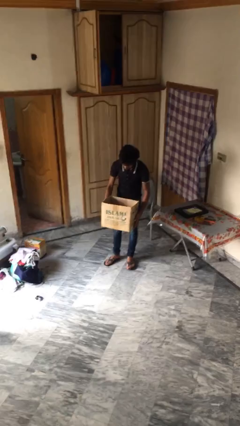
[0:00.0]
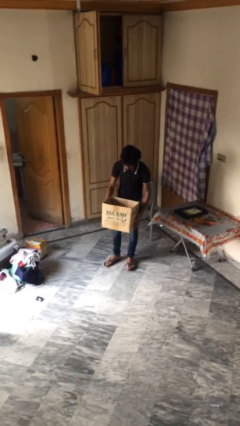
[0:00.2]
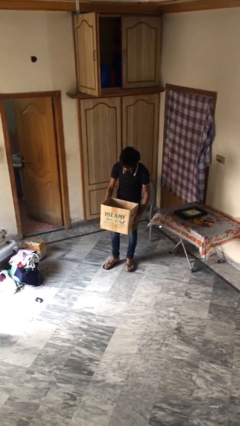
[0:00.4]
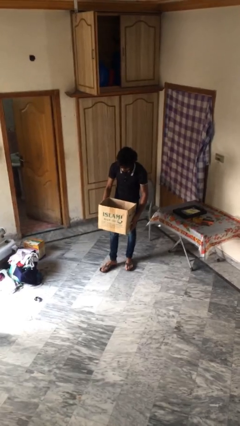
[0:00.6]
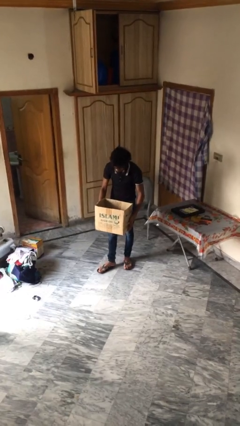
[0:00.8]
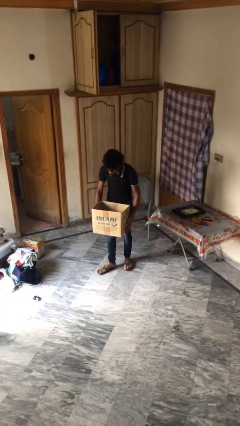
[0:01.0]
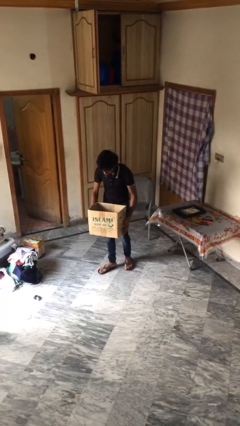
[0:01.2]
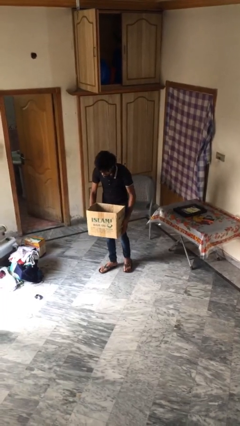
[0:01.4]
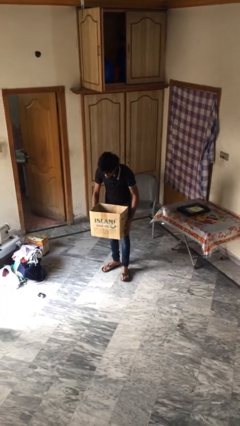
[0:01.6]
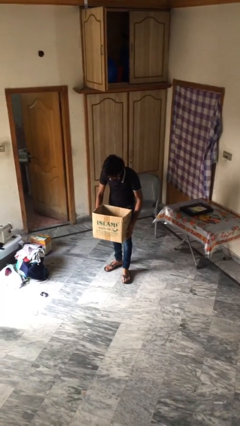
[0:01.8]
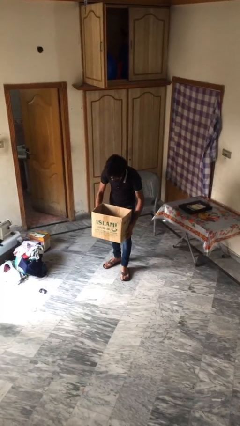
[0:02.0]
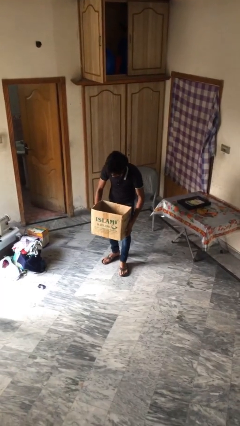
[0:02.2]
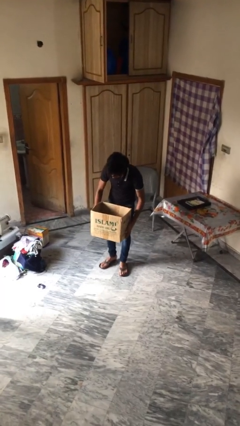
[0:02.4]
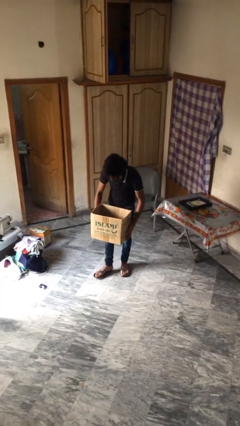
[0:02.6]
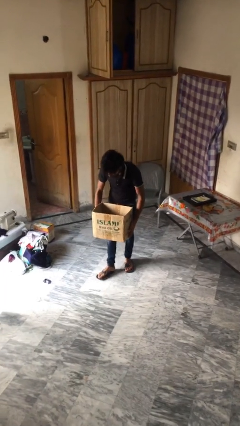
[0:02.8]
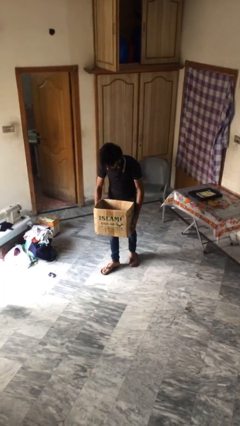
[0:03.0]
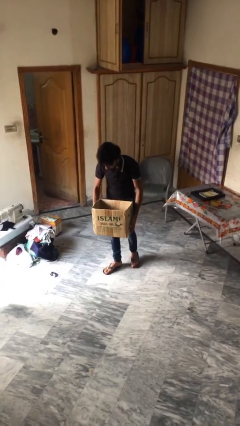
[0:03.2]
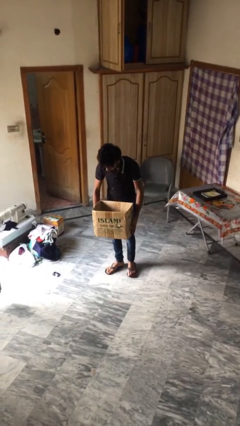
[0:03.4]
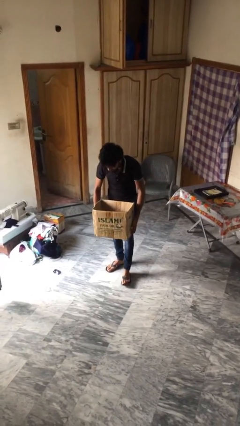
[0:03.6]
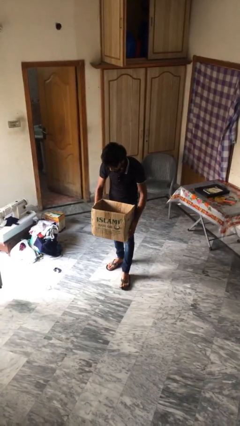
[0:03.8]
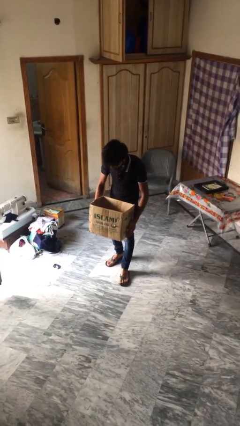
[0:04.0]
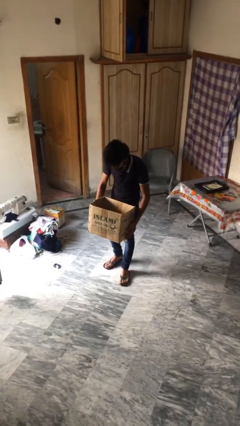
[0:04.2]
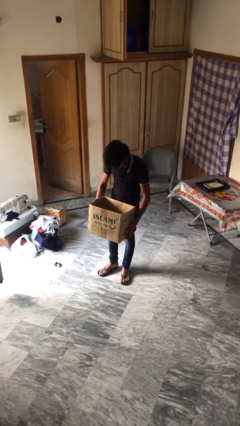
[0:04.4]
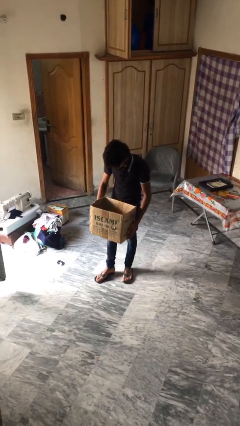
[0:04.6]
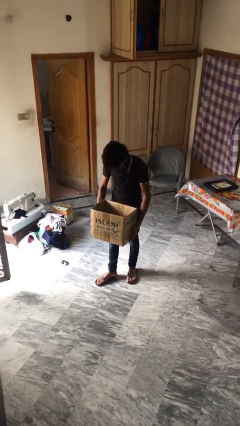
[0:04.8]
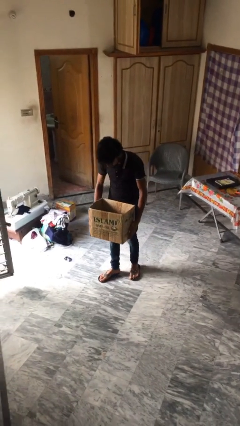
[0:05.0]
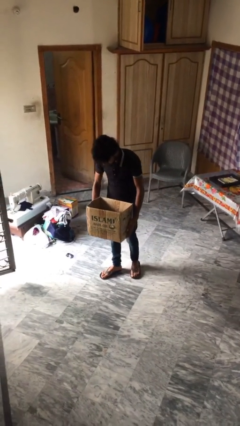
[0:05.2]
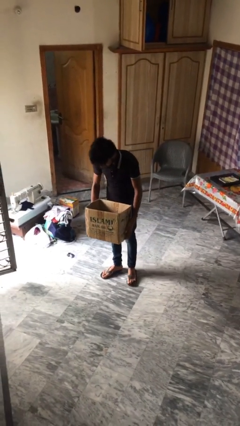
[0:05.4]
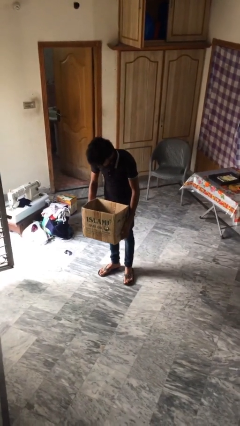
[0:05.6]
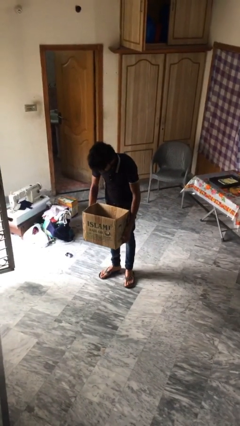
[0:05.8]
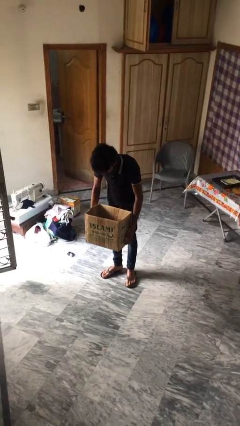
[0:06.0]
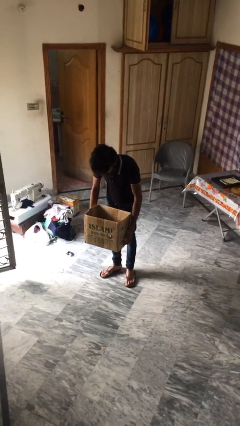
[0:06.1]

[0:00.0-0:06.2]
person carries heavy object

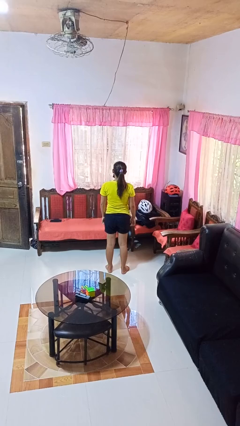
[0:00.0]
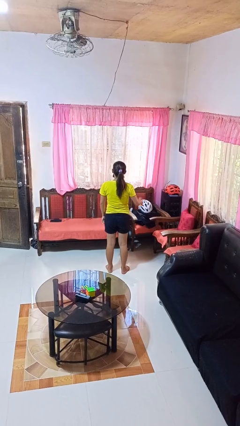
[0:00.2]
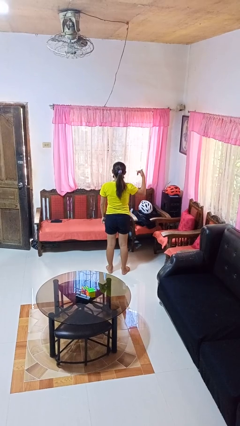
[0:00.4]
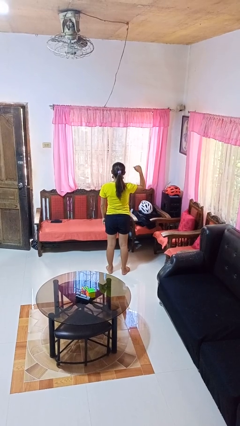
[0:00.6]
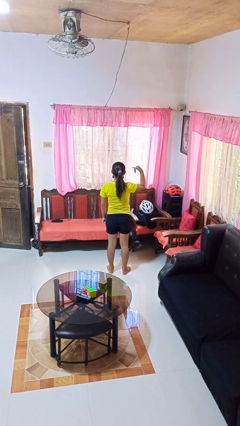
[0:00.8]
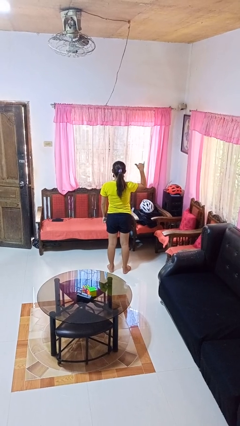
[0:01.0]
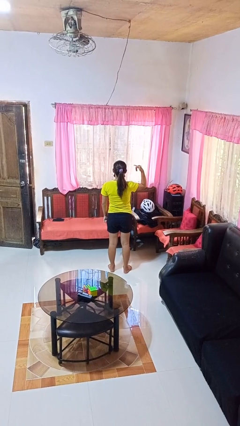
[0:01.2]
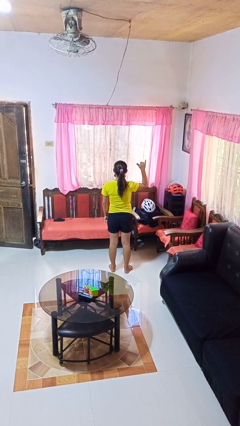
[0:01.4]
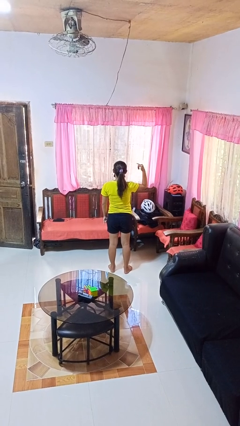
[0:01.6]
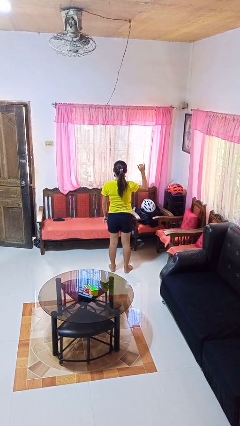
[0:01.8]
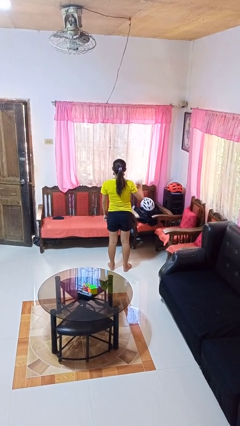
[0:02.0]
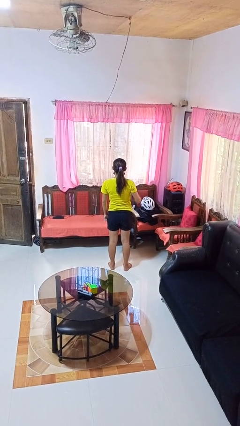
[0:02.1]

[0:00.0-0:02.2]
person gestures hang loose

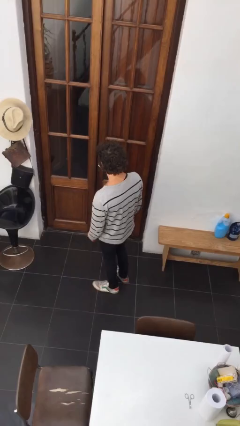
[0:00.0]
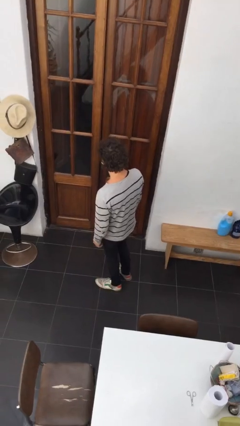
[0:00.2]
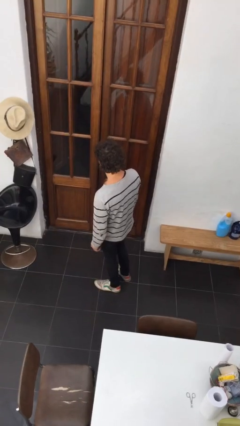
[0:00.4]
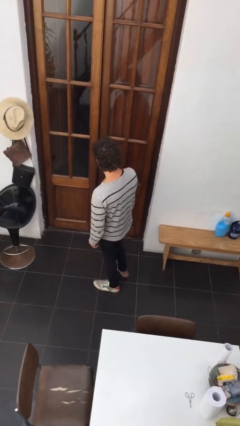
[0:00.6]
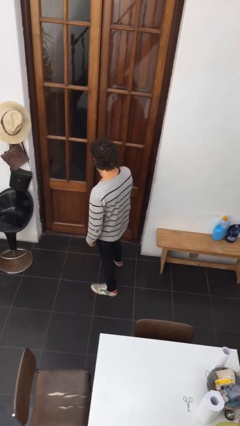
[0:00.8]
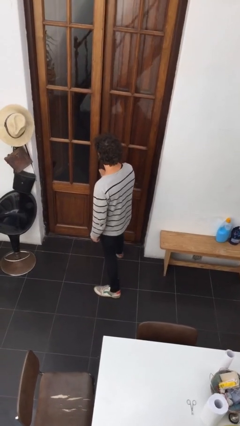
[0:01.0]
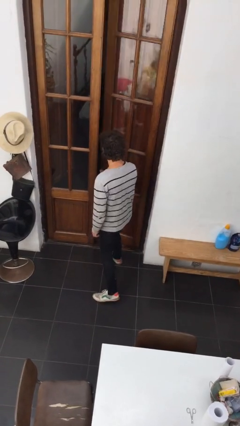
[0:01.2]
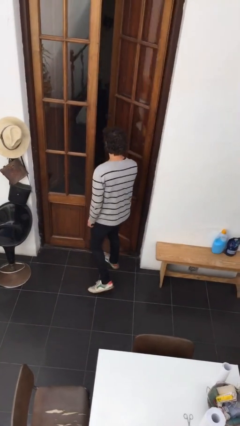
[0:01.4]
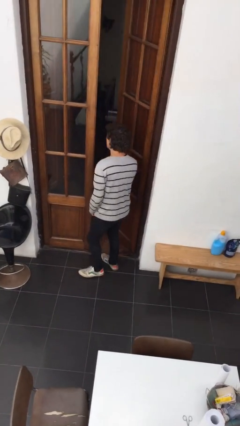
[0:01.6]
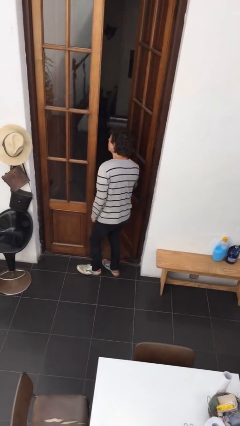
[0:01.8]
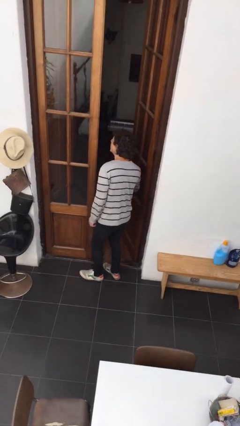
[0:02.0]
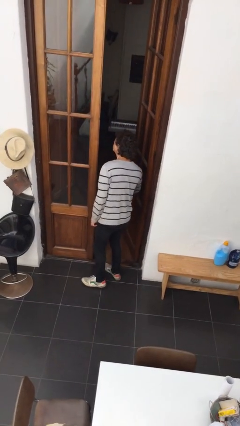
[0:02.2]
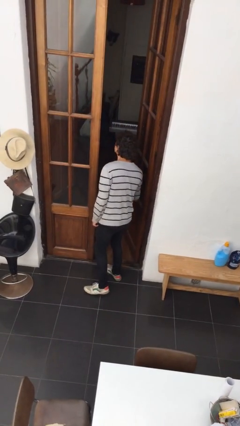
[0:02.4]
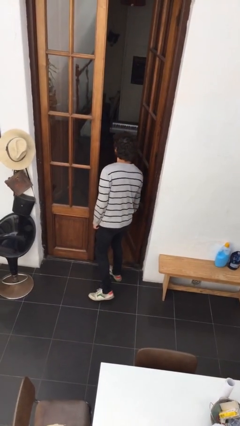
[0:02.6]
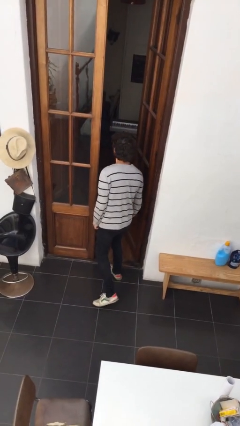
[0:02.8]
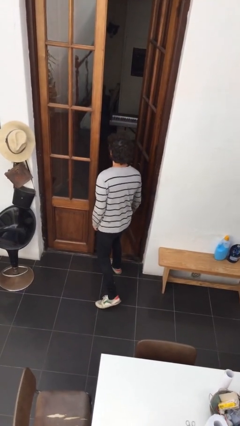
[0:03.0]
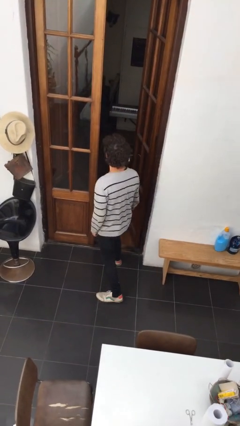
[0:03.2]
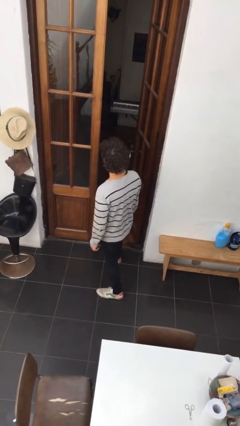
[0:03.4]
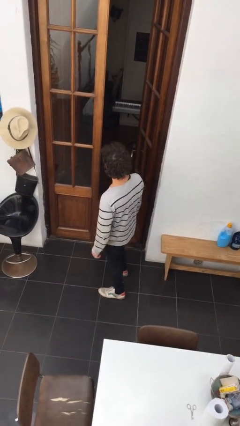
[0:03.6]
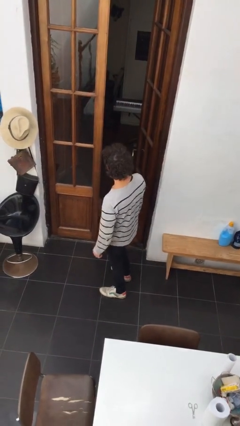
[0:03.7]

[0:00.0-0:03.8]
person opens facility door

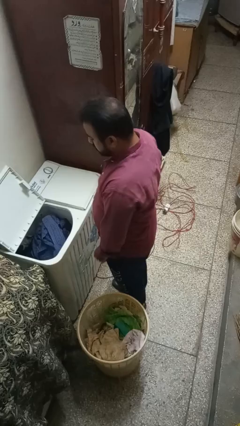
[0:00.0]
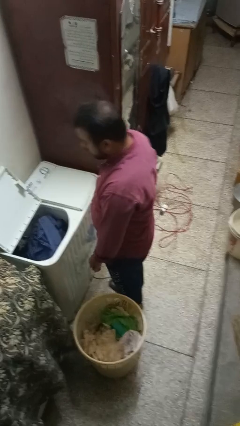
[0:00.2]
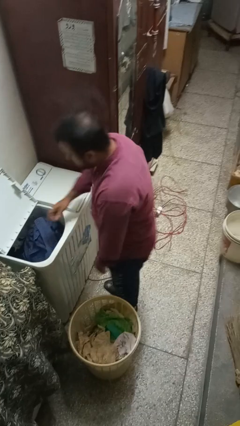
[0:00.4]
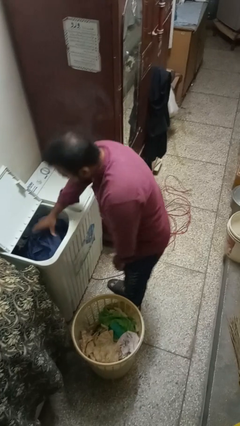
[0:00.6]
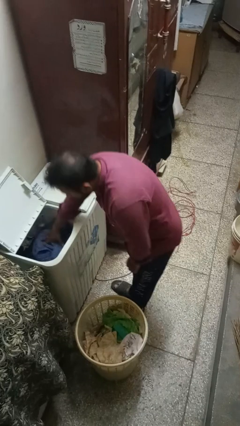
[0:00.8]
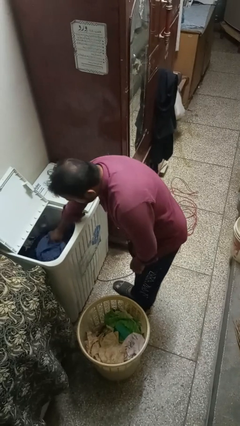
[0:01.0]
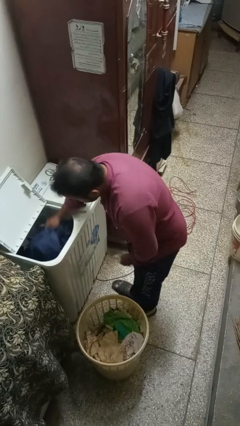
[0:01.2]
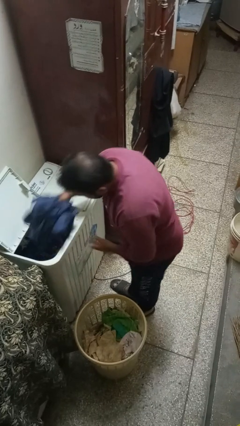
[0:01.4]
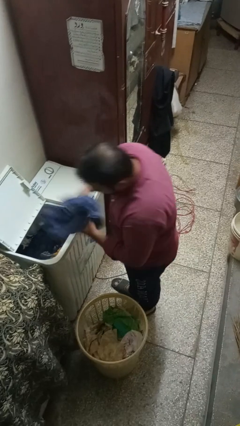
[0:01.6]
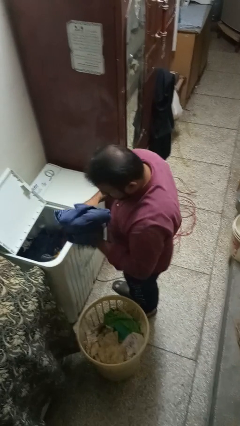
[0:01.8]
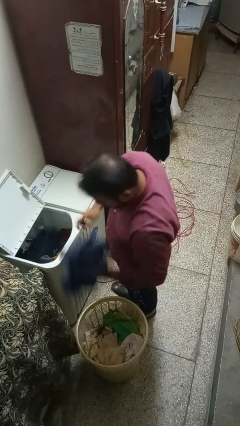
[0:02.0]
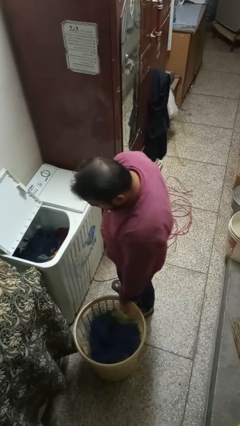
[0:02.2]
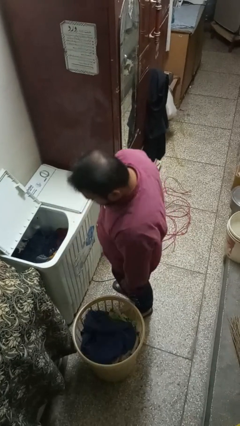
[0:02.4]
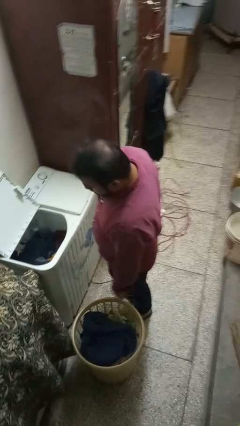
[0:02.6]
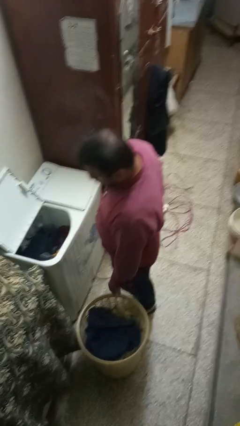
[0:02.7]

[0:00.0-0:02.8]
person unloads clotheswasher

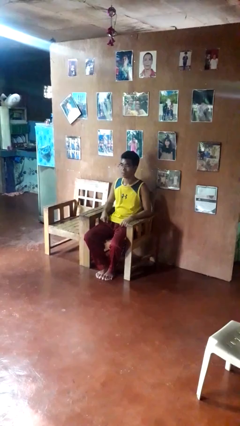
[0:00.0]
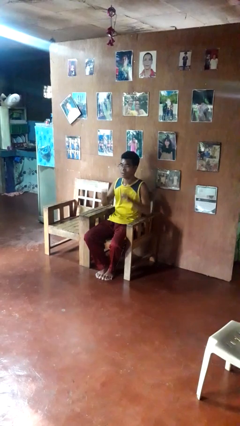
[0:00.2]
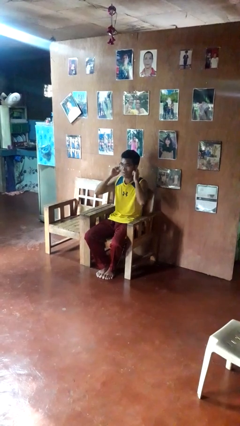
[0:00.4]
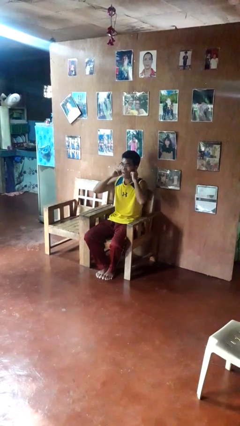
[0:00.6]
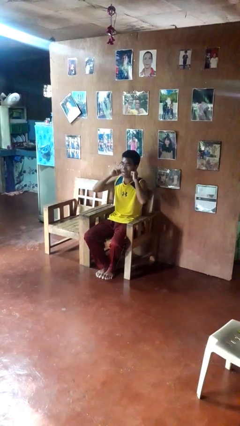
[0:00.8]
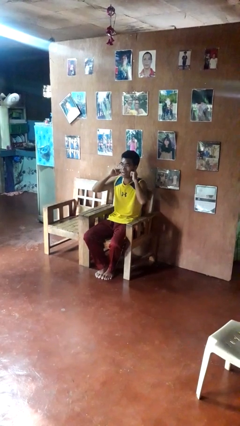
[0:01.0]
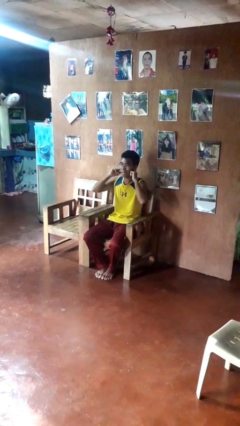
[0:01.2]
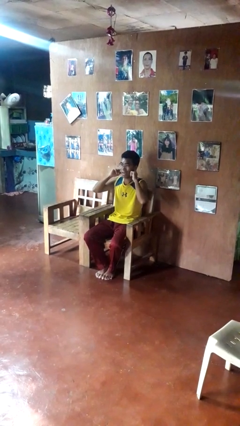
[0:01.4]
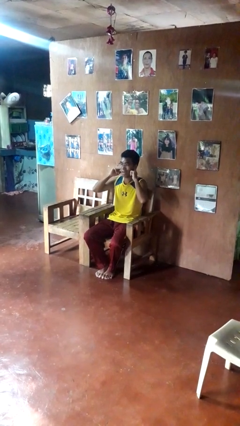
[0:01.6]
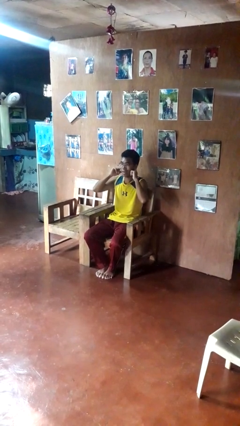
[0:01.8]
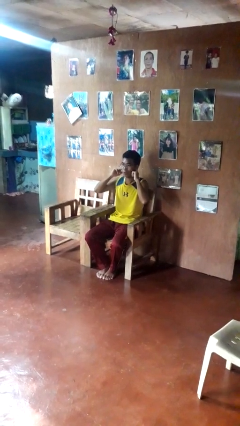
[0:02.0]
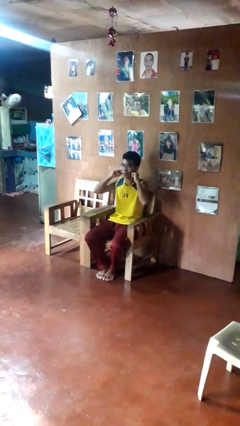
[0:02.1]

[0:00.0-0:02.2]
person puts fingers in ear
